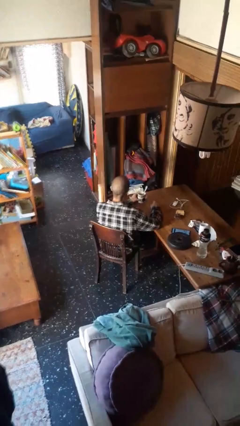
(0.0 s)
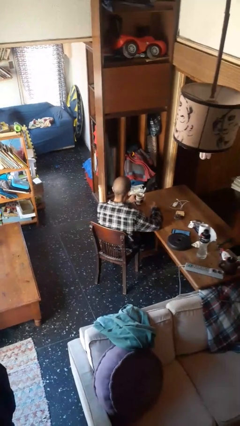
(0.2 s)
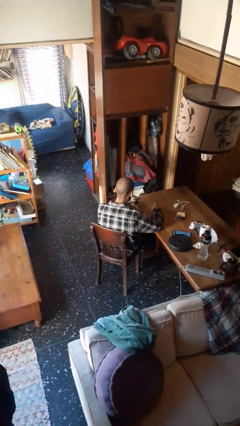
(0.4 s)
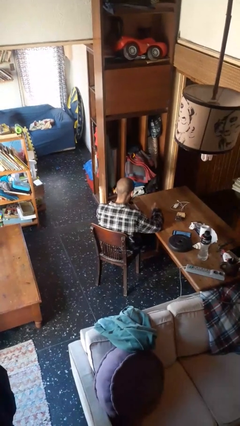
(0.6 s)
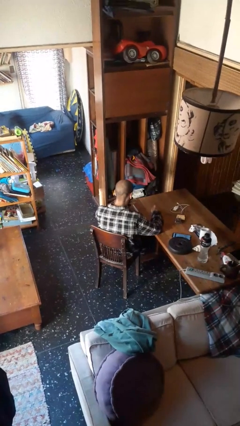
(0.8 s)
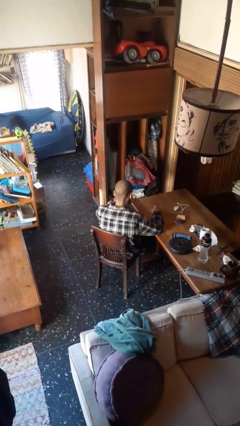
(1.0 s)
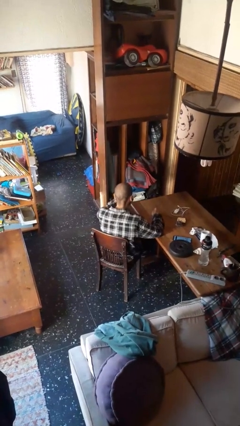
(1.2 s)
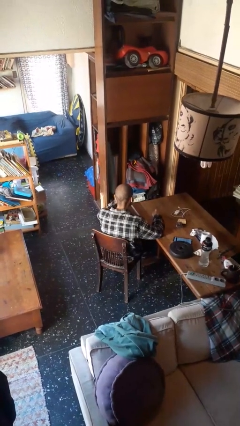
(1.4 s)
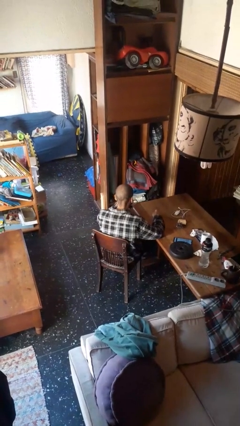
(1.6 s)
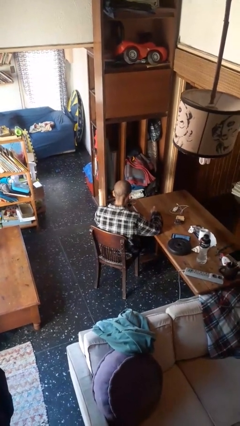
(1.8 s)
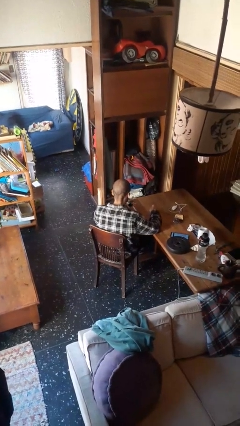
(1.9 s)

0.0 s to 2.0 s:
person drinks from mug

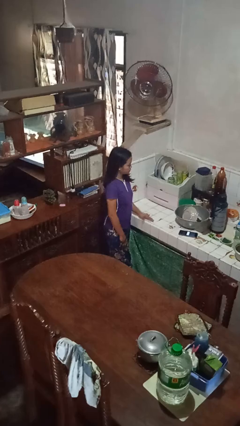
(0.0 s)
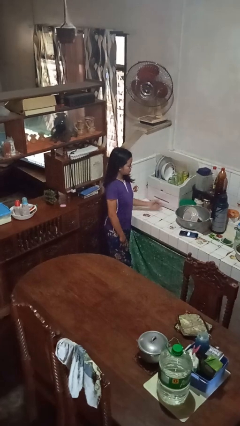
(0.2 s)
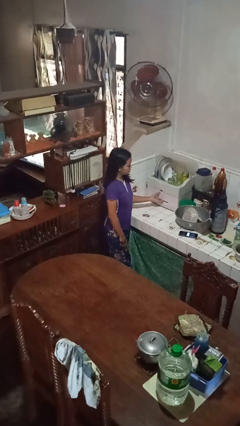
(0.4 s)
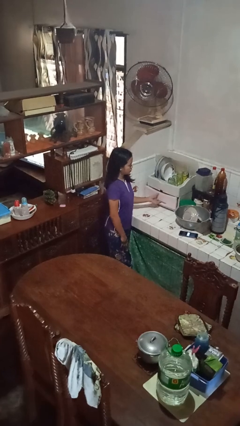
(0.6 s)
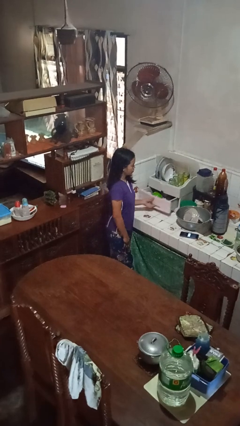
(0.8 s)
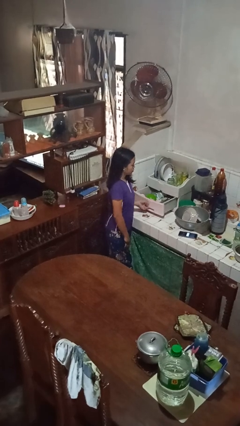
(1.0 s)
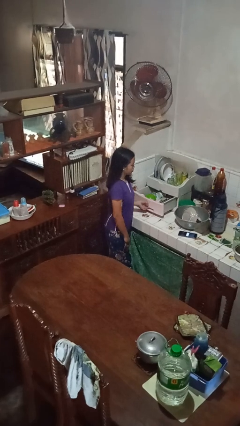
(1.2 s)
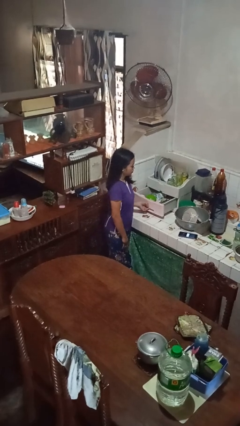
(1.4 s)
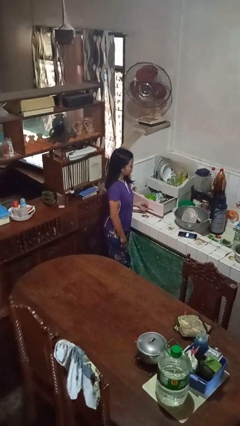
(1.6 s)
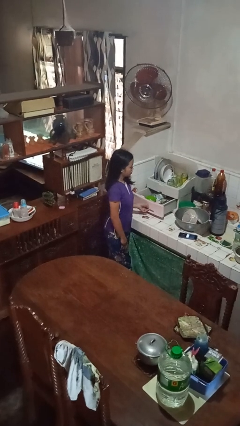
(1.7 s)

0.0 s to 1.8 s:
person opens kitchen drawer

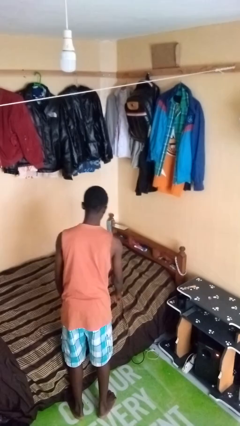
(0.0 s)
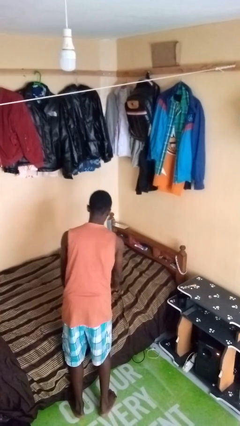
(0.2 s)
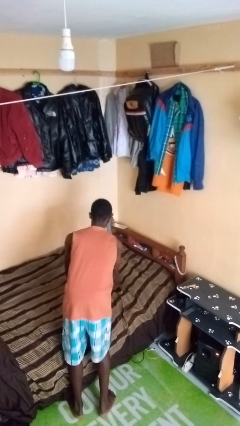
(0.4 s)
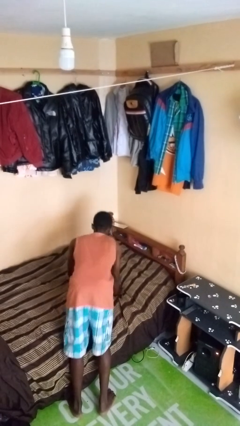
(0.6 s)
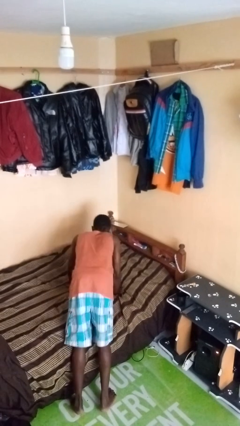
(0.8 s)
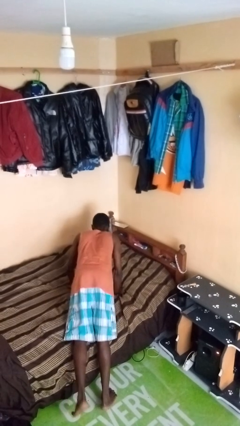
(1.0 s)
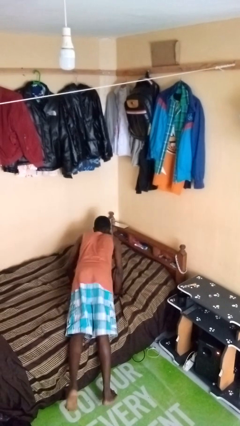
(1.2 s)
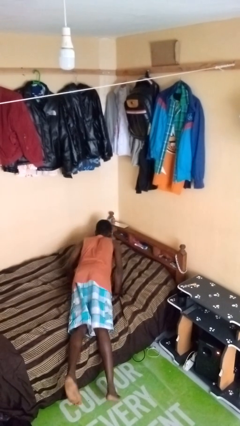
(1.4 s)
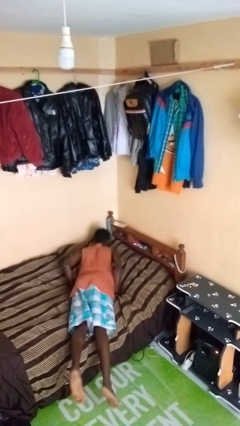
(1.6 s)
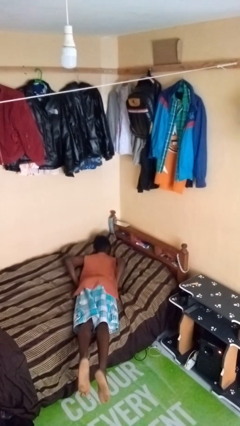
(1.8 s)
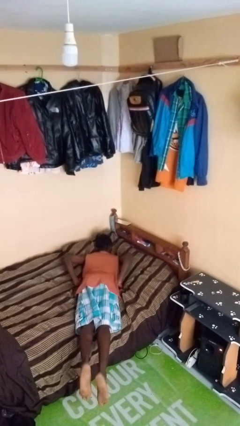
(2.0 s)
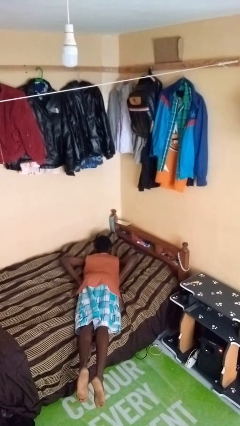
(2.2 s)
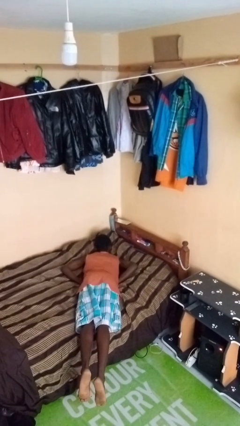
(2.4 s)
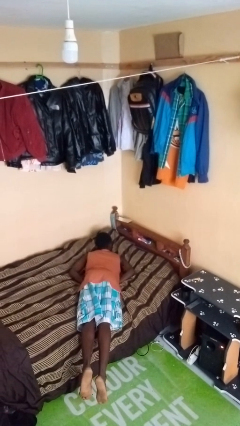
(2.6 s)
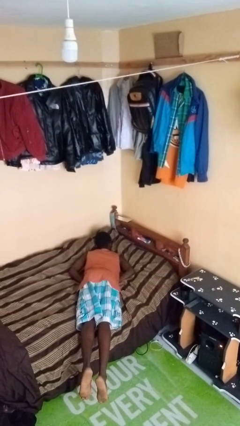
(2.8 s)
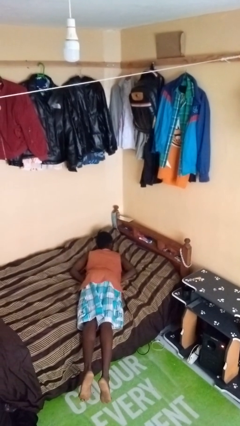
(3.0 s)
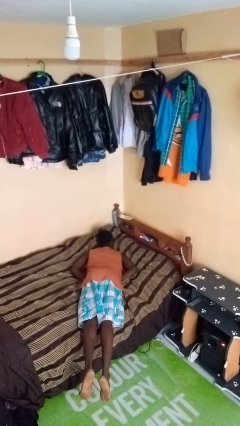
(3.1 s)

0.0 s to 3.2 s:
person lies down on bed

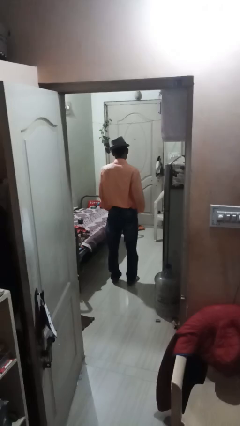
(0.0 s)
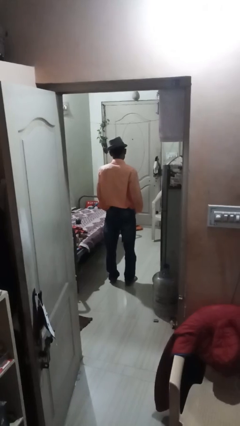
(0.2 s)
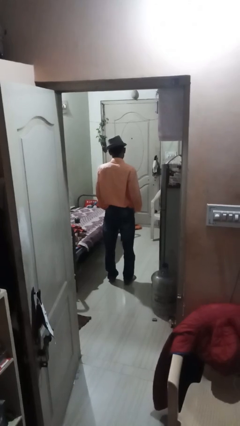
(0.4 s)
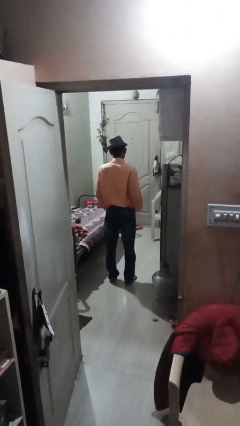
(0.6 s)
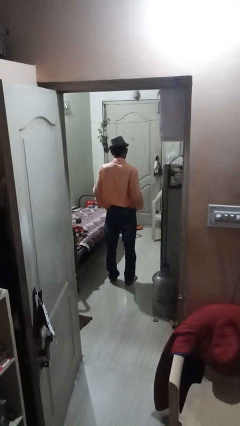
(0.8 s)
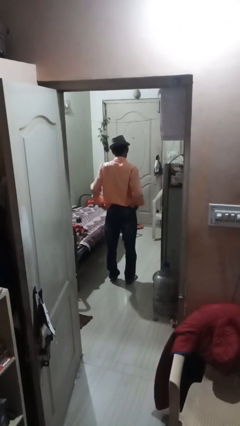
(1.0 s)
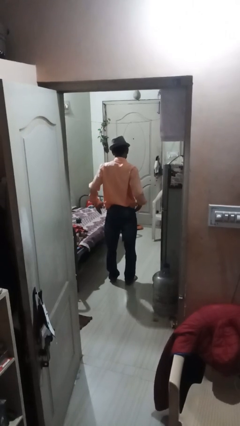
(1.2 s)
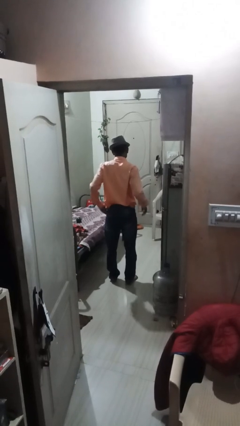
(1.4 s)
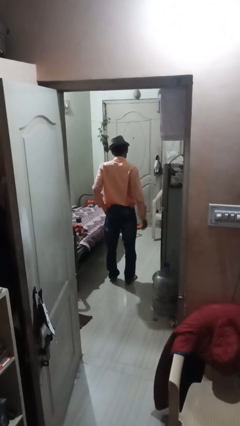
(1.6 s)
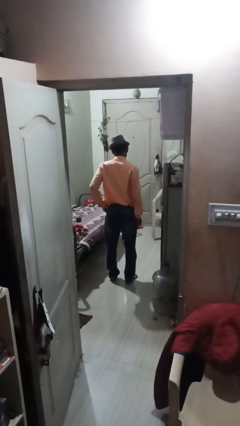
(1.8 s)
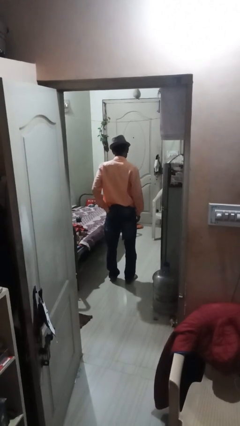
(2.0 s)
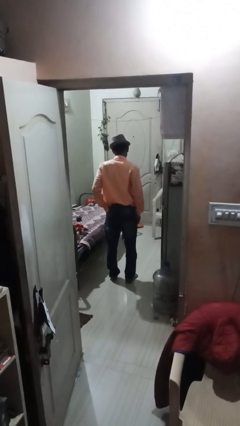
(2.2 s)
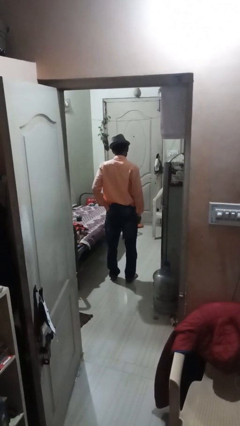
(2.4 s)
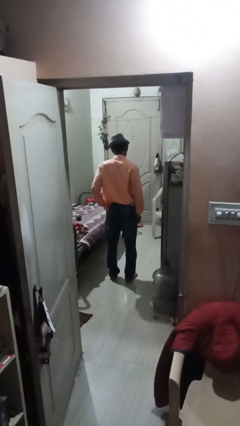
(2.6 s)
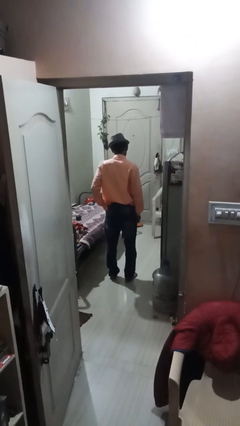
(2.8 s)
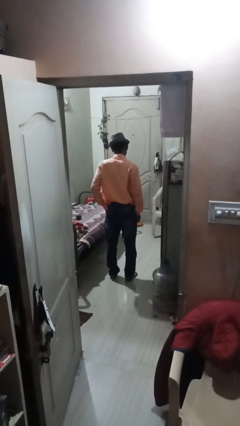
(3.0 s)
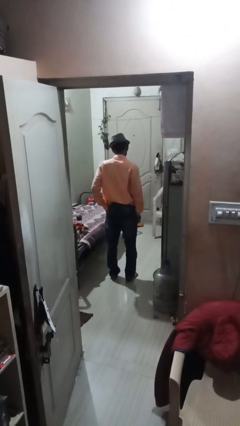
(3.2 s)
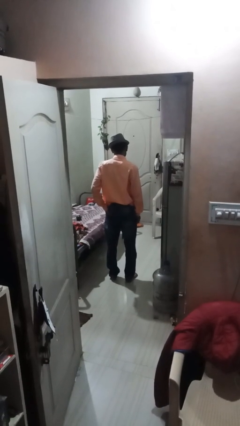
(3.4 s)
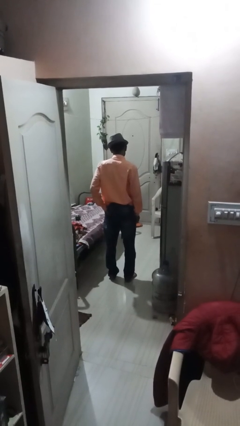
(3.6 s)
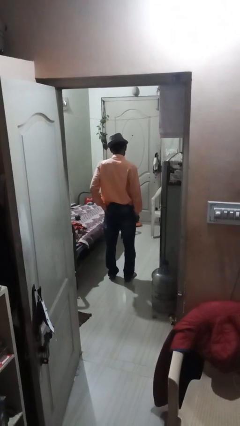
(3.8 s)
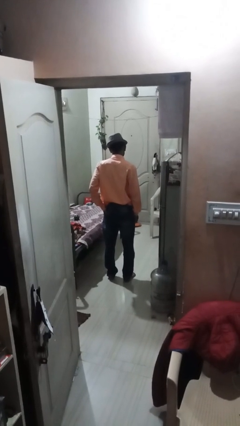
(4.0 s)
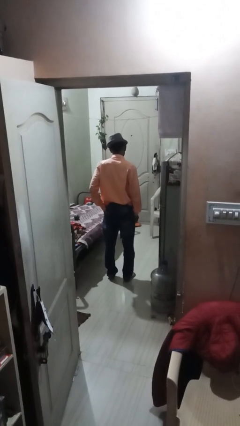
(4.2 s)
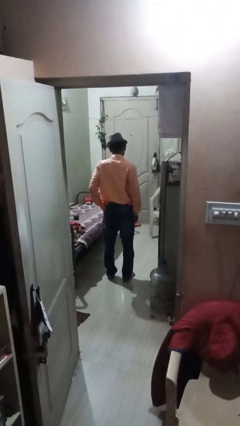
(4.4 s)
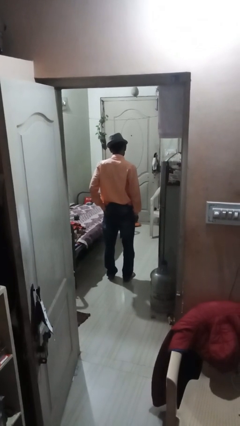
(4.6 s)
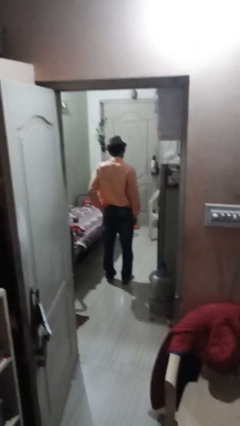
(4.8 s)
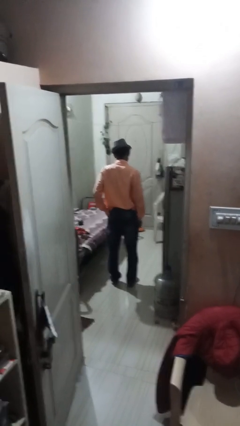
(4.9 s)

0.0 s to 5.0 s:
person puts hands in back pockets

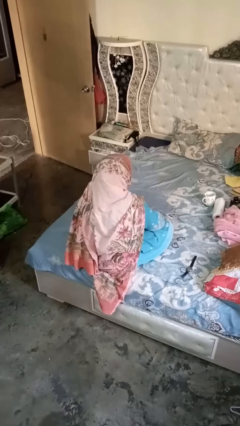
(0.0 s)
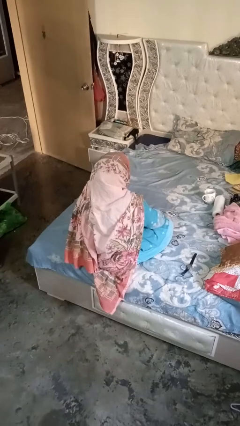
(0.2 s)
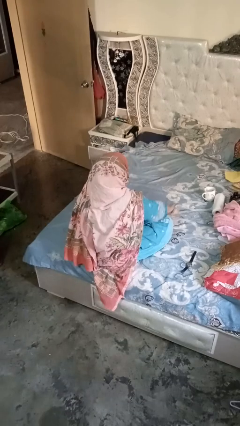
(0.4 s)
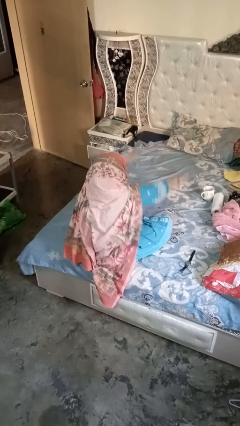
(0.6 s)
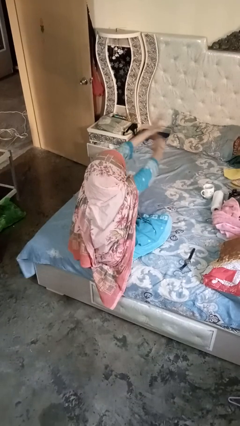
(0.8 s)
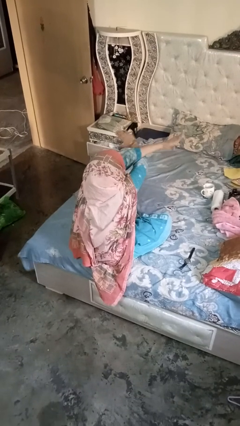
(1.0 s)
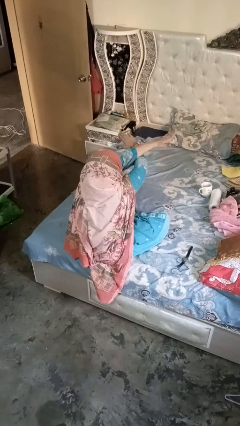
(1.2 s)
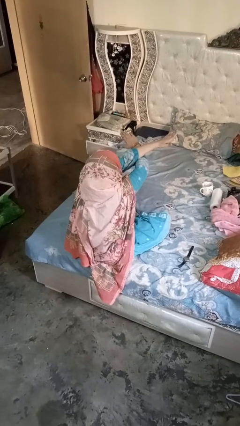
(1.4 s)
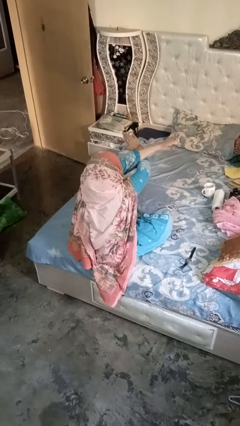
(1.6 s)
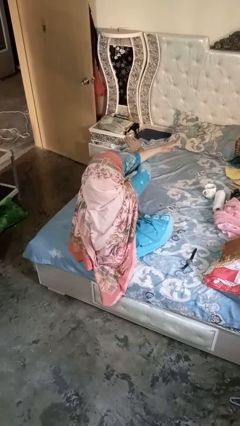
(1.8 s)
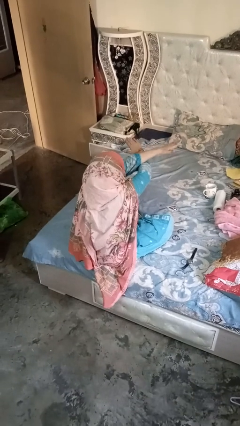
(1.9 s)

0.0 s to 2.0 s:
person gestures arms x

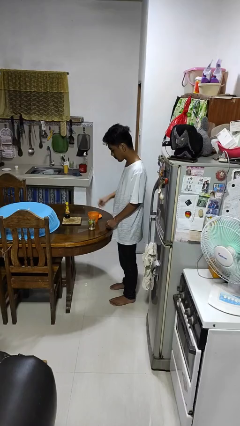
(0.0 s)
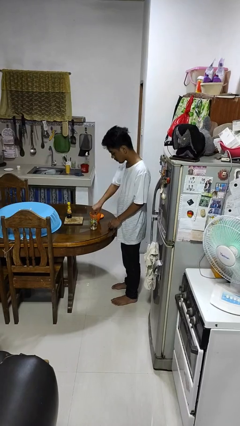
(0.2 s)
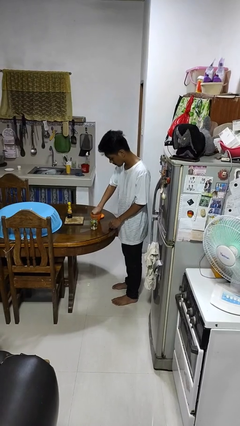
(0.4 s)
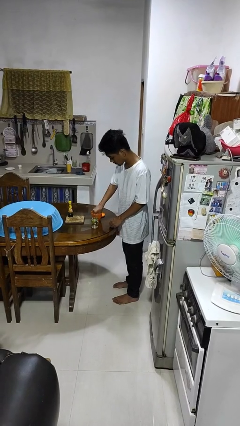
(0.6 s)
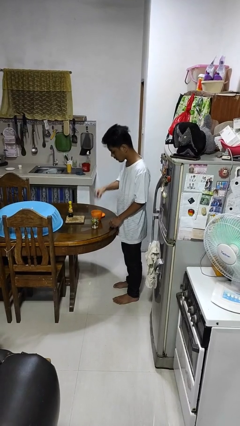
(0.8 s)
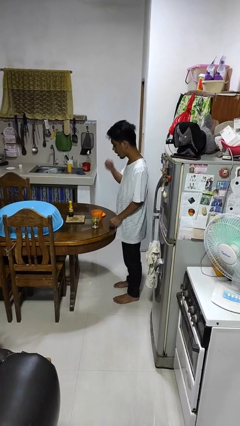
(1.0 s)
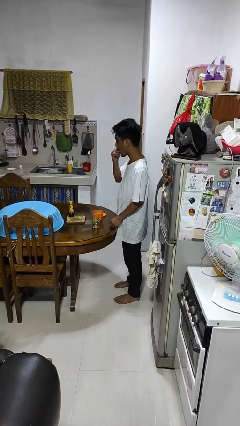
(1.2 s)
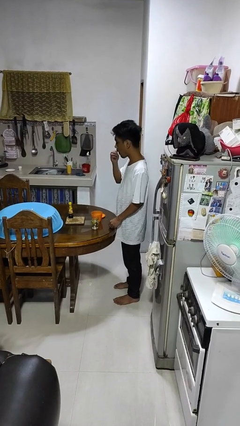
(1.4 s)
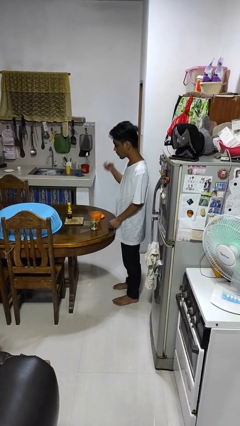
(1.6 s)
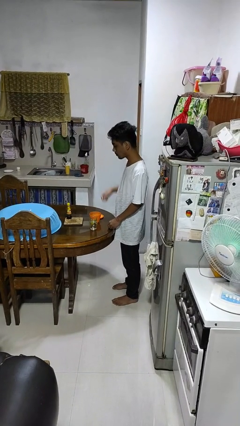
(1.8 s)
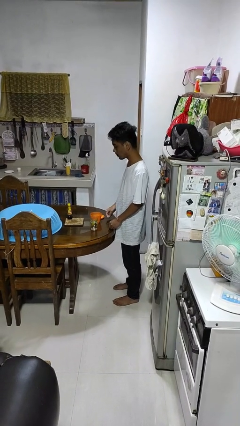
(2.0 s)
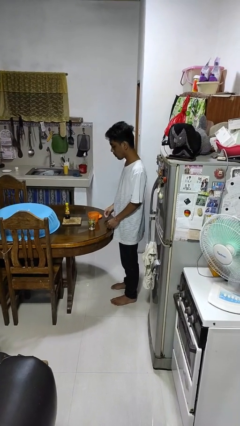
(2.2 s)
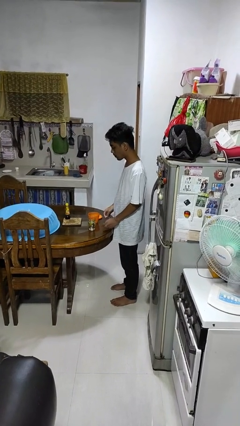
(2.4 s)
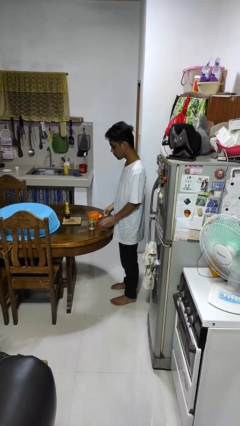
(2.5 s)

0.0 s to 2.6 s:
person takes medicine pills

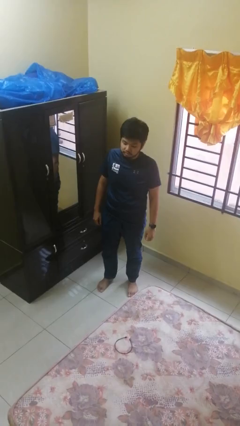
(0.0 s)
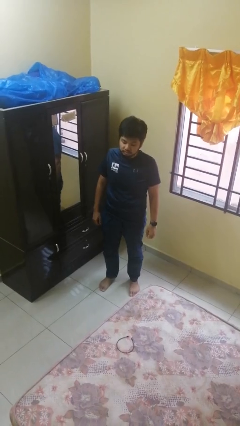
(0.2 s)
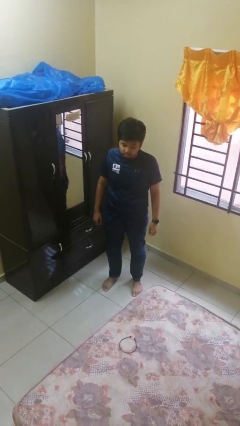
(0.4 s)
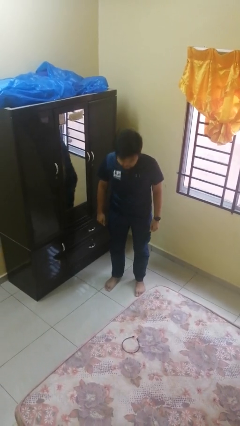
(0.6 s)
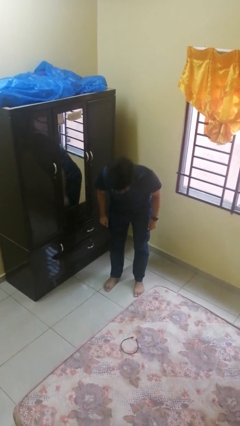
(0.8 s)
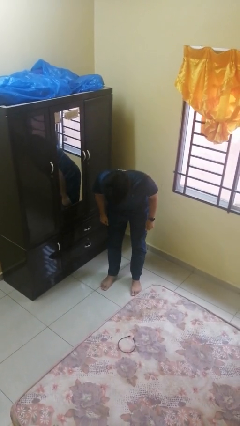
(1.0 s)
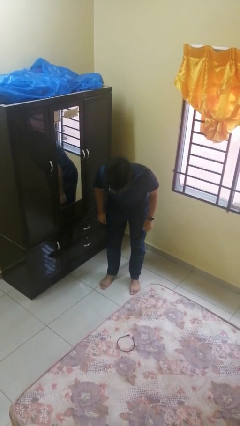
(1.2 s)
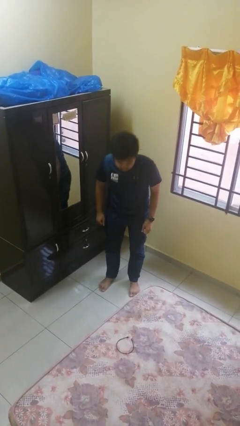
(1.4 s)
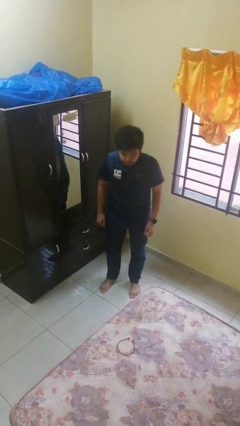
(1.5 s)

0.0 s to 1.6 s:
person bows
